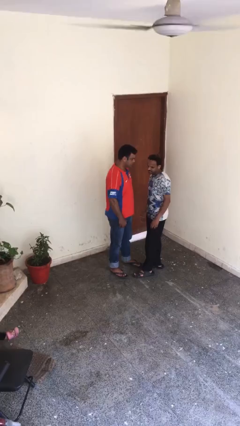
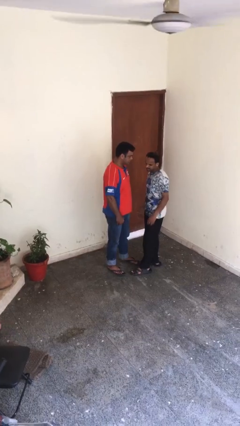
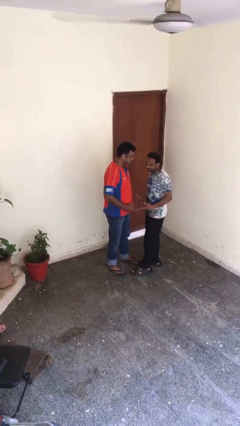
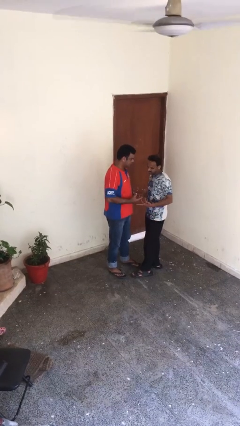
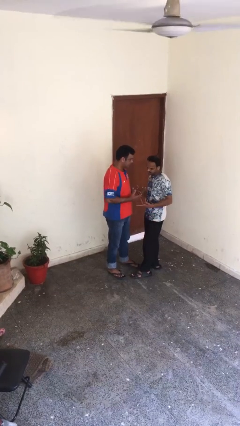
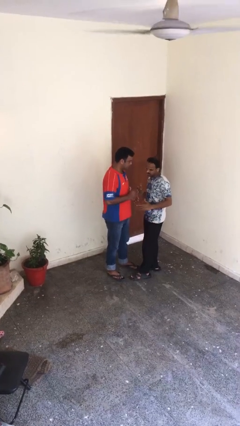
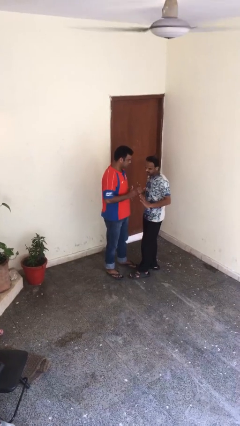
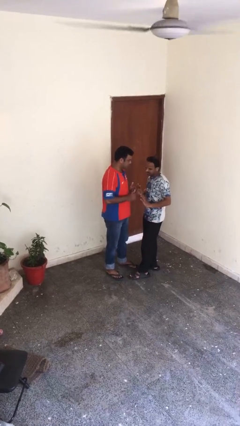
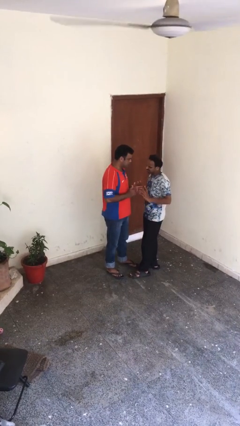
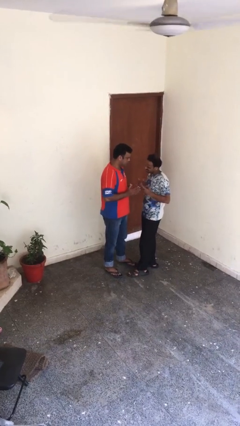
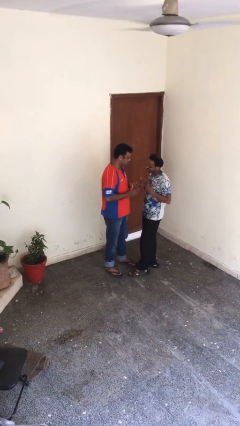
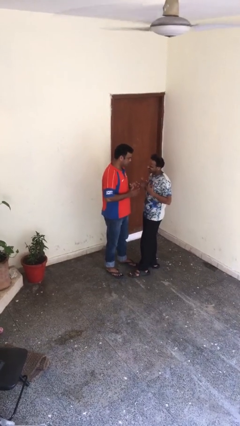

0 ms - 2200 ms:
person talks to person

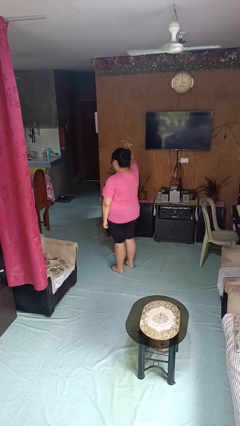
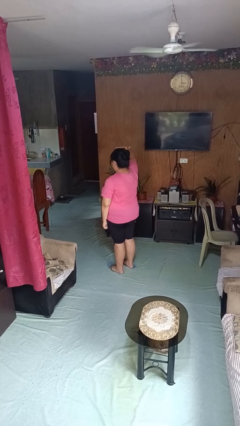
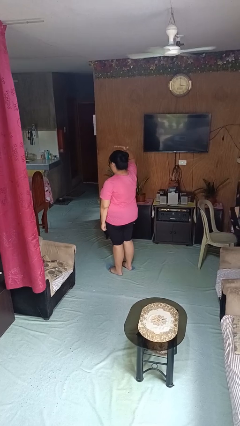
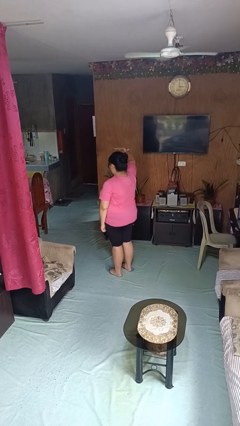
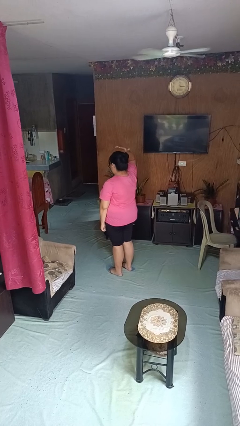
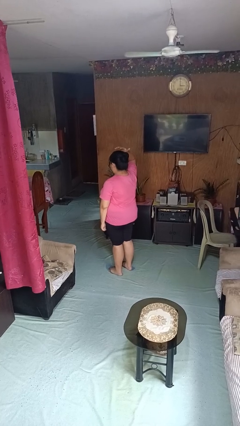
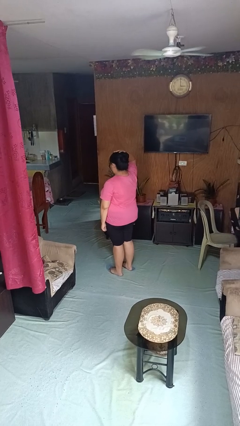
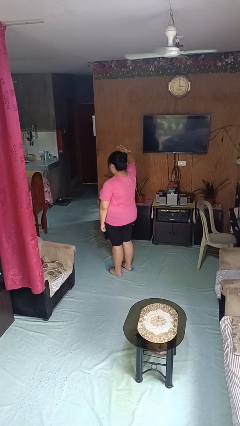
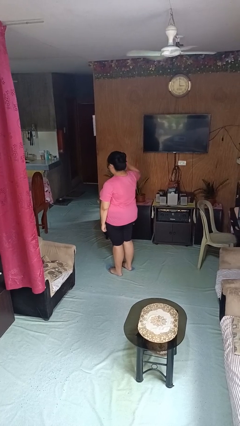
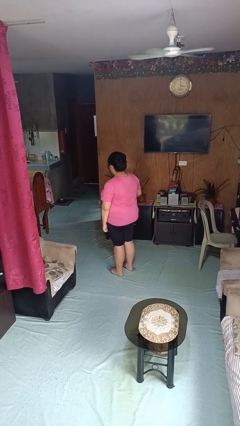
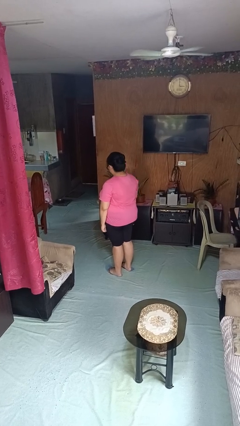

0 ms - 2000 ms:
person pats head

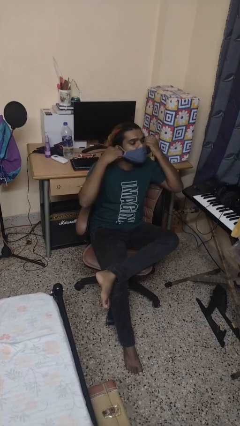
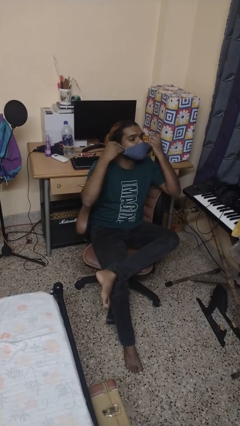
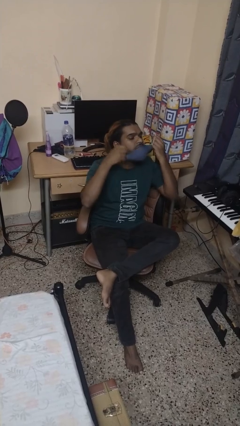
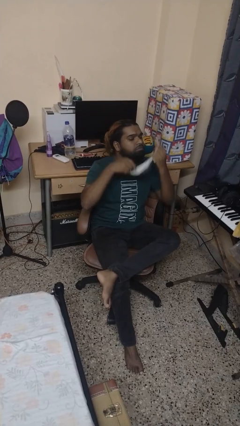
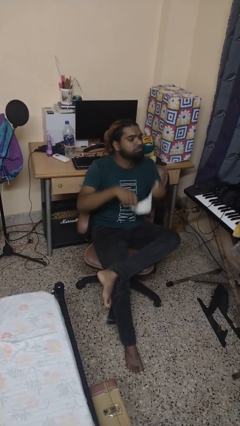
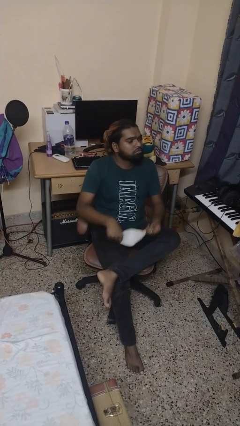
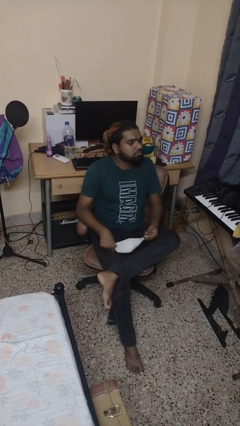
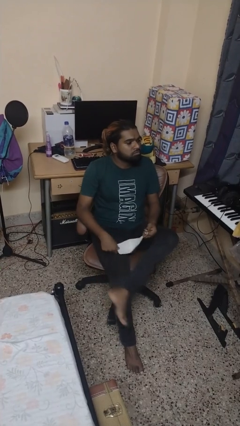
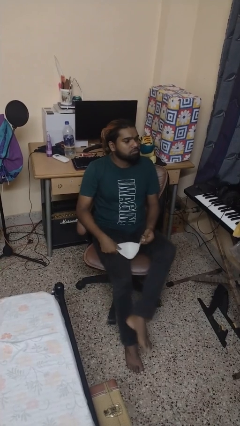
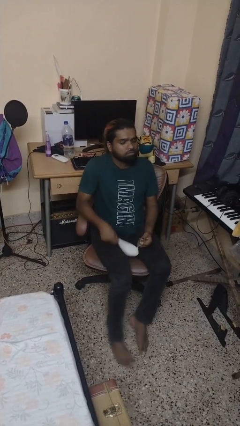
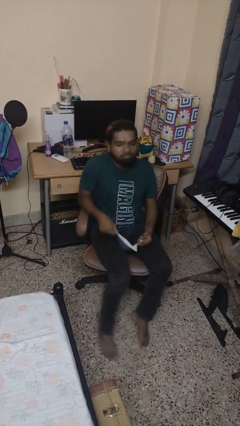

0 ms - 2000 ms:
person takes off facemask

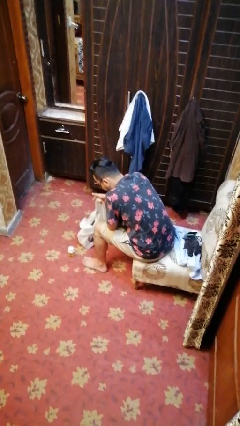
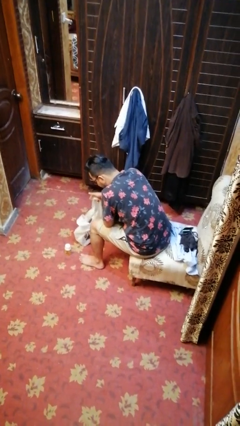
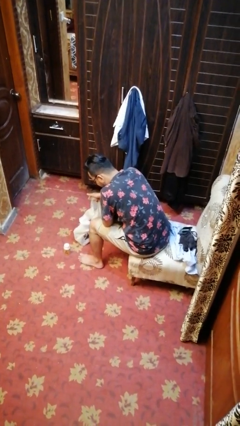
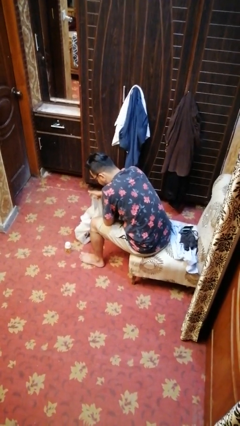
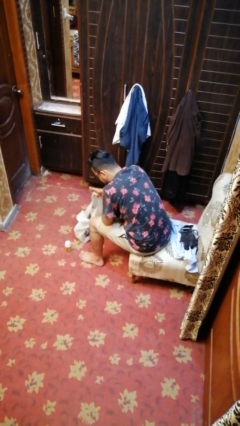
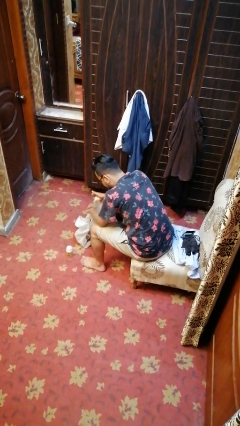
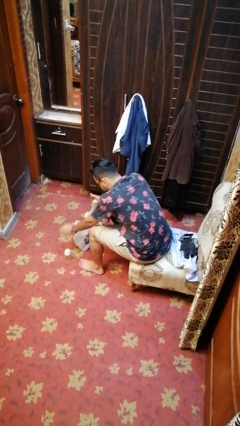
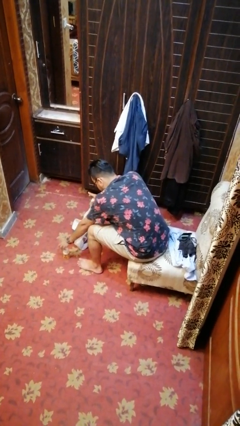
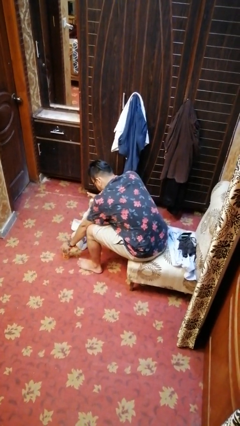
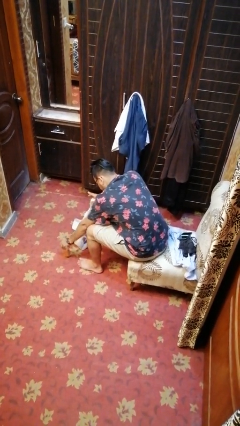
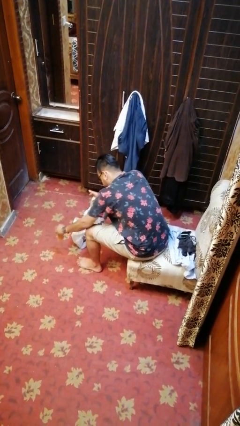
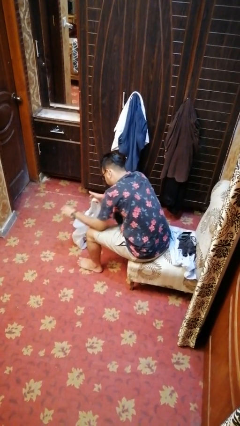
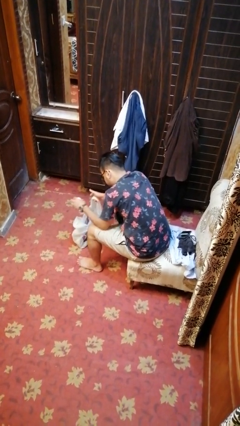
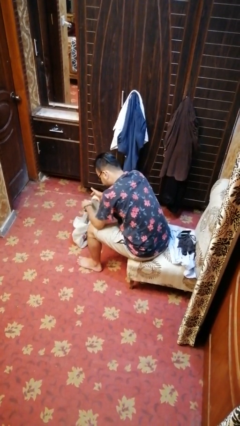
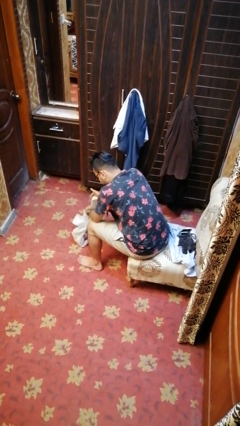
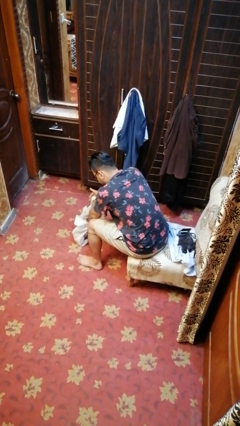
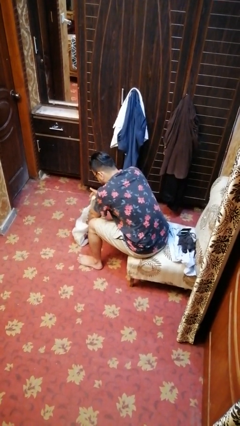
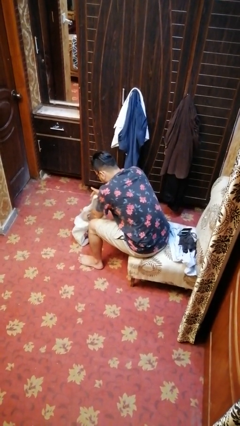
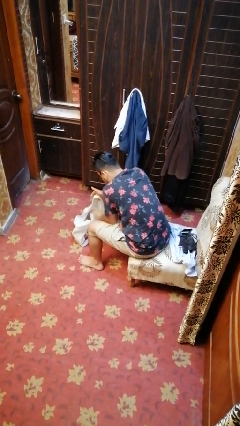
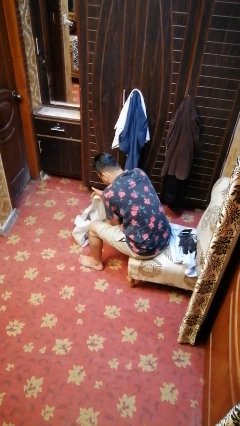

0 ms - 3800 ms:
person puts object into bag

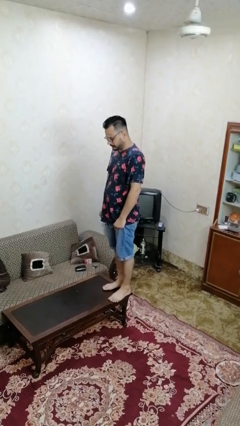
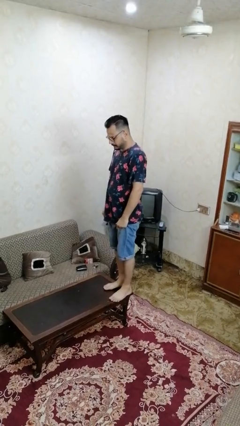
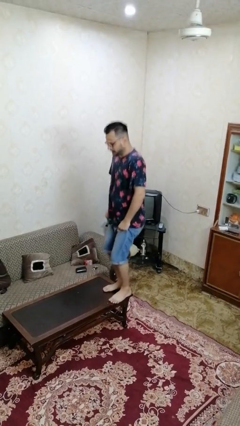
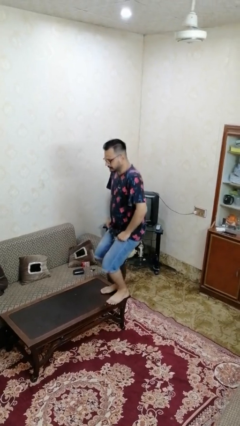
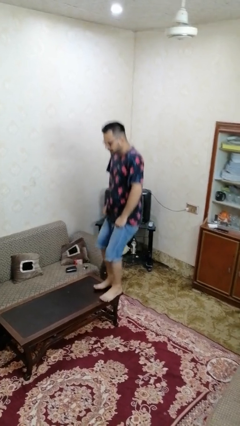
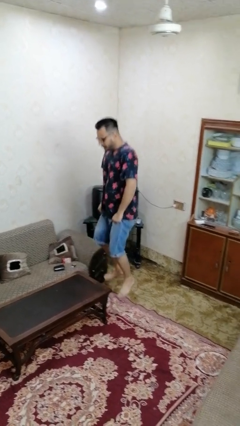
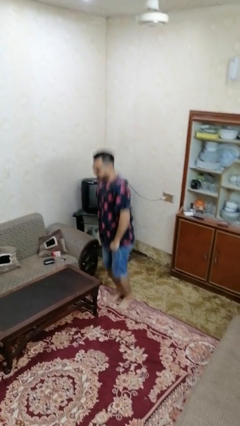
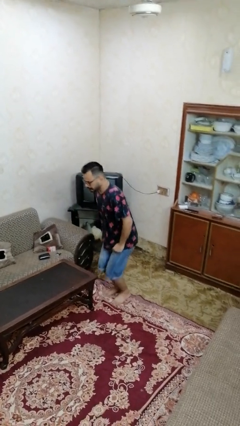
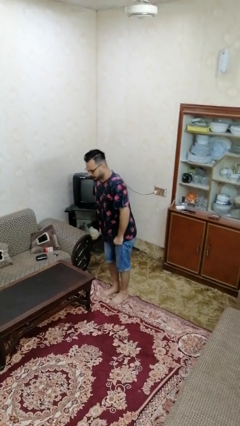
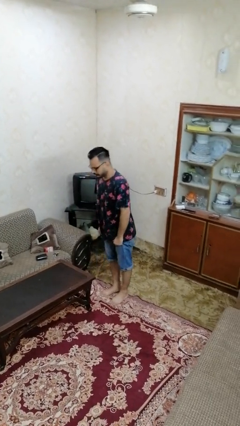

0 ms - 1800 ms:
person climbs off table

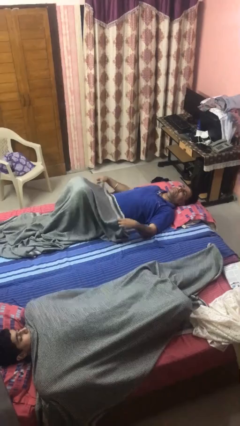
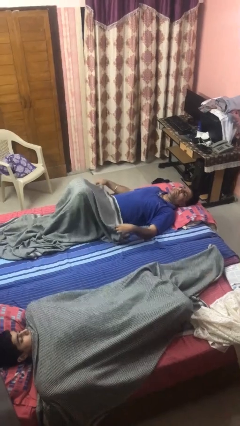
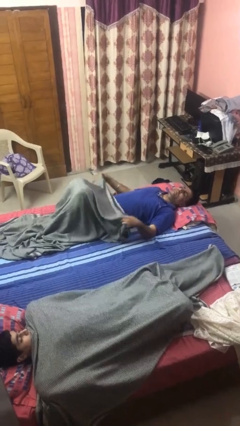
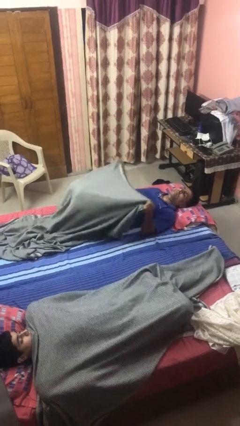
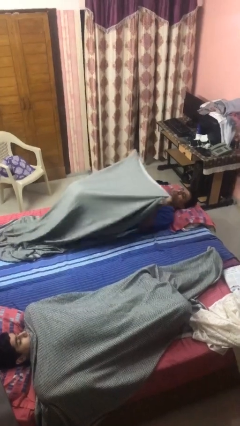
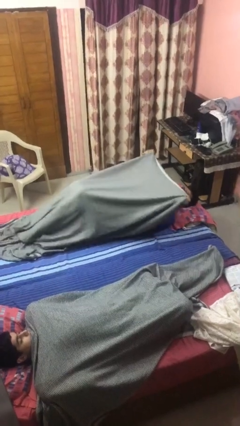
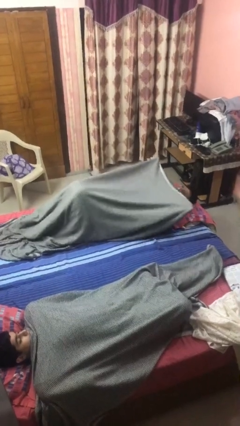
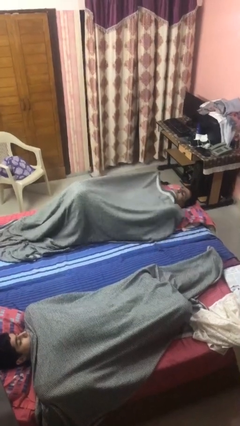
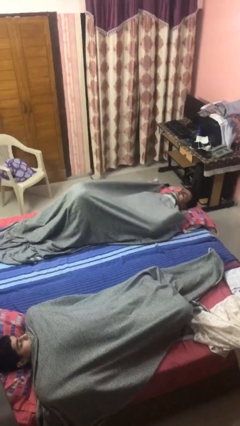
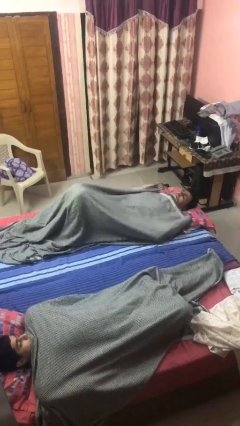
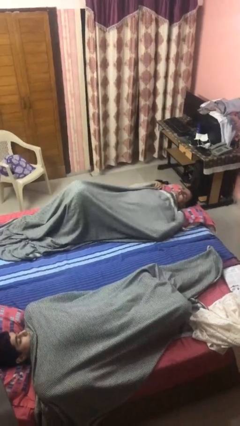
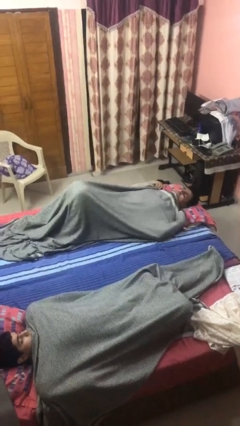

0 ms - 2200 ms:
person covers with bedsheets

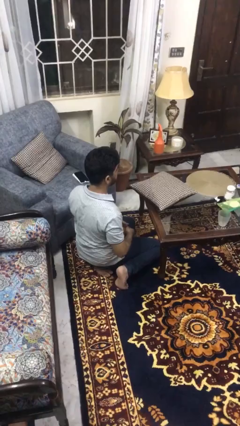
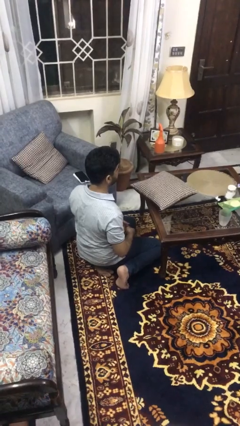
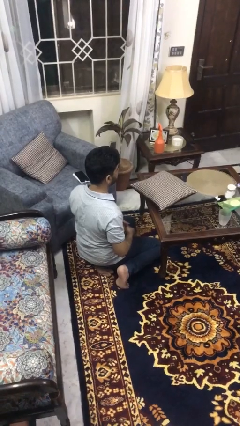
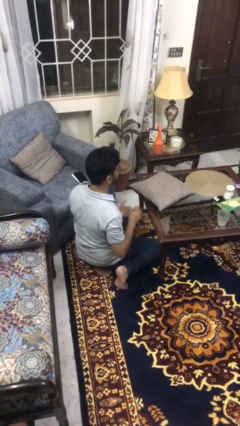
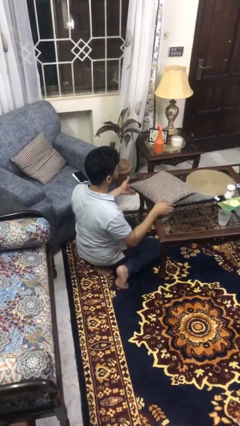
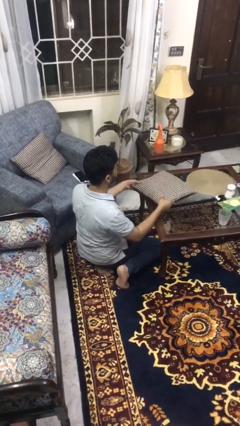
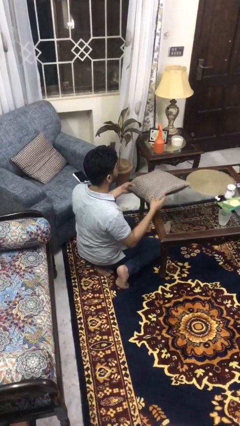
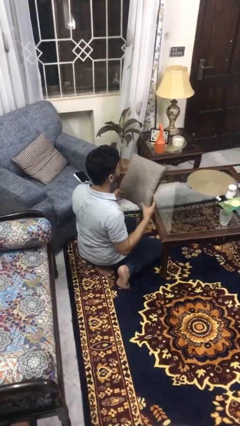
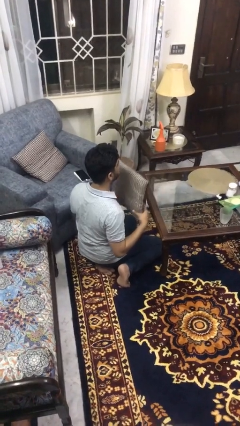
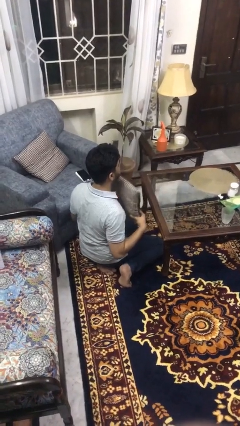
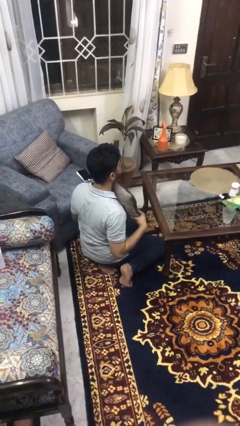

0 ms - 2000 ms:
person picks up object from table

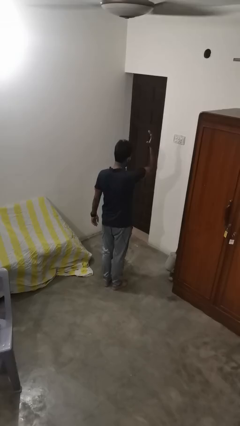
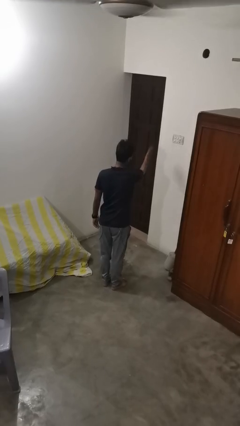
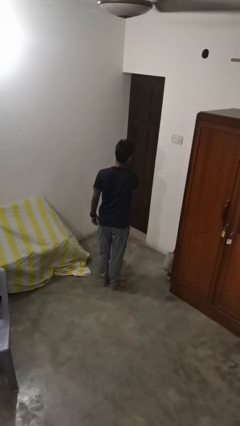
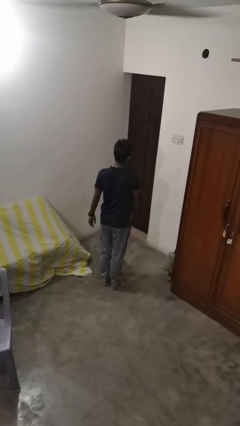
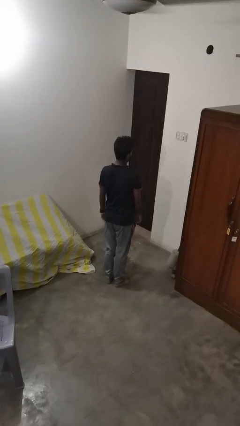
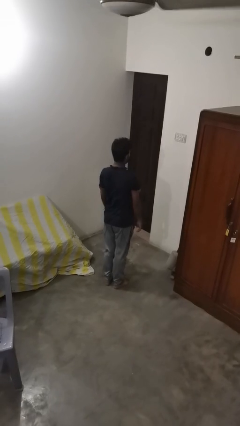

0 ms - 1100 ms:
person karate chop

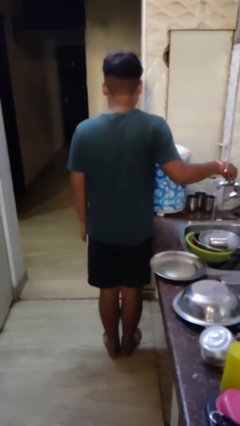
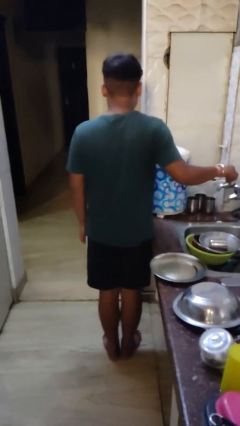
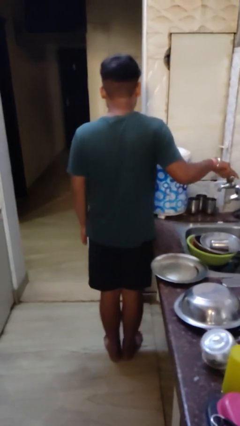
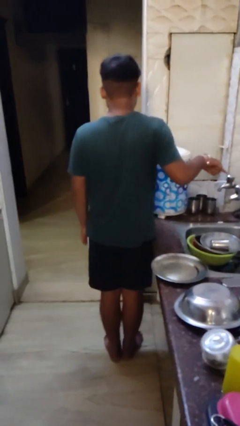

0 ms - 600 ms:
person turns off faucet
